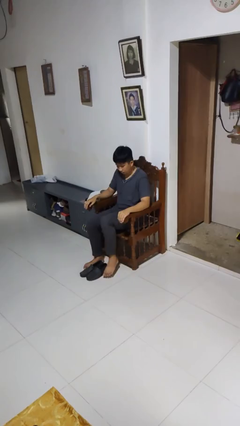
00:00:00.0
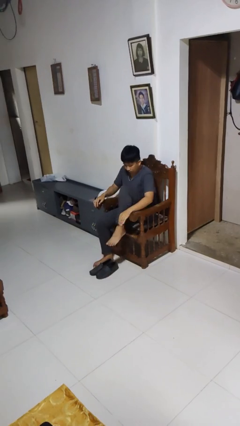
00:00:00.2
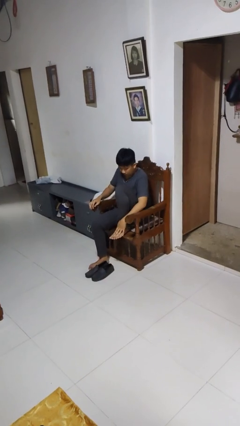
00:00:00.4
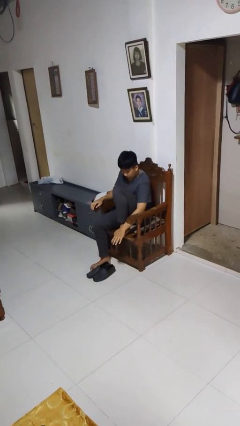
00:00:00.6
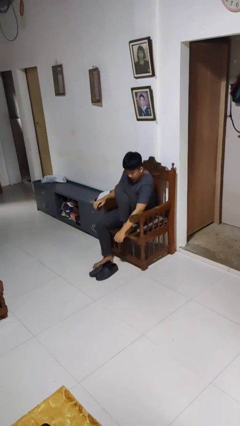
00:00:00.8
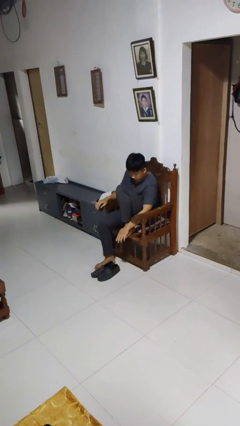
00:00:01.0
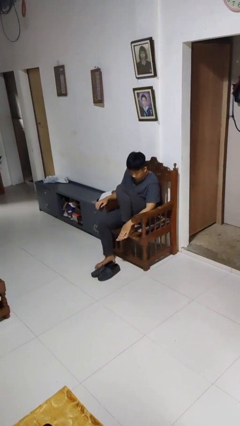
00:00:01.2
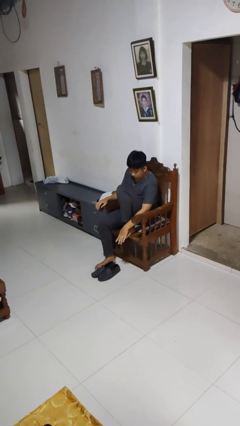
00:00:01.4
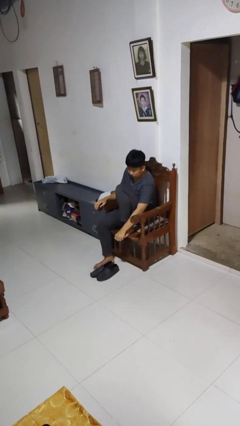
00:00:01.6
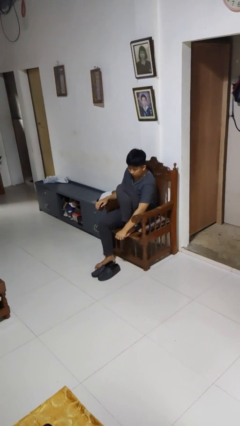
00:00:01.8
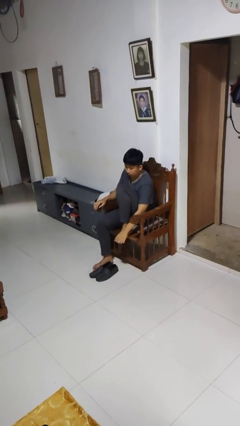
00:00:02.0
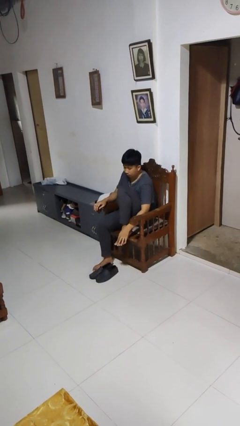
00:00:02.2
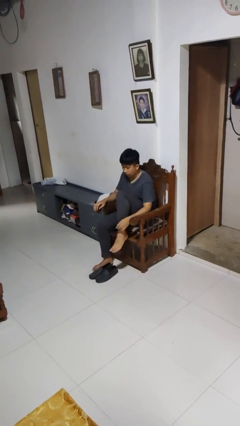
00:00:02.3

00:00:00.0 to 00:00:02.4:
person rubs foot

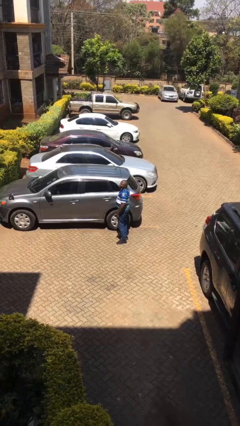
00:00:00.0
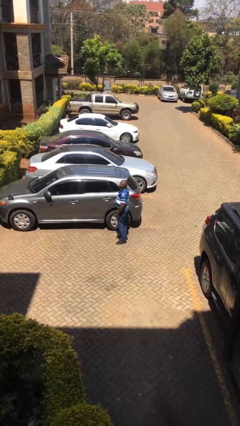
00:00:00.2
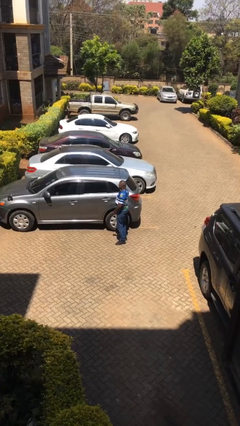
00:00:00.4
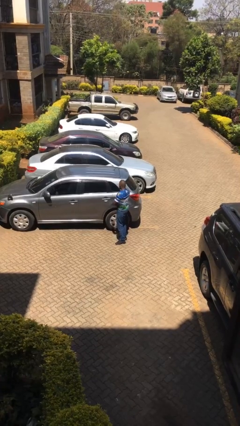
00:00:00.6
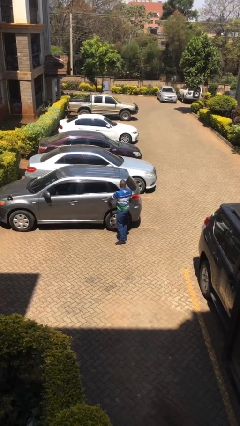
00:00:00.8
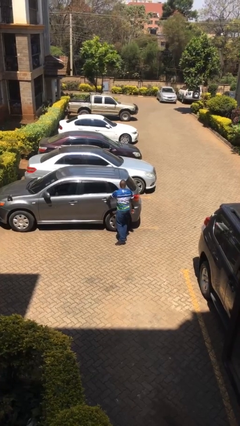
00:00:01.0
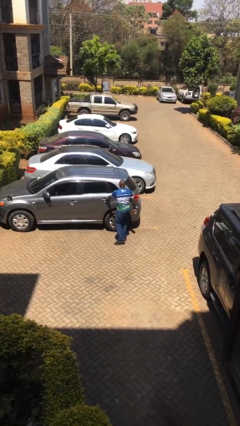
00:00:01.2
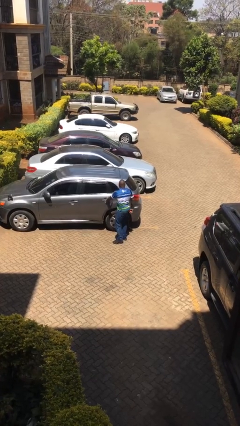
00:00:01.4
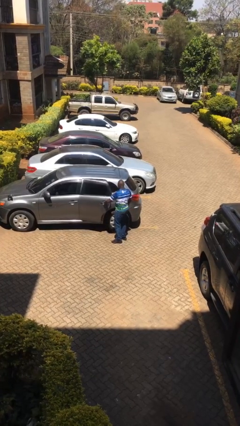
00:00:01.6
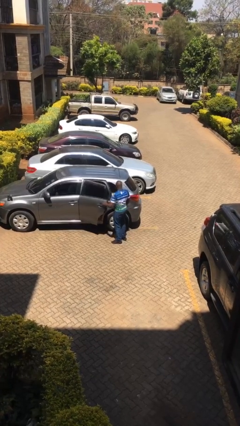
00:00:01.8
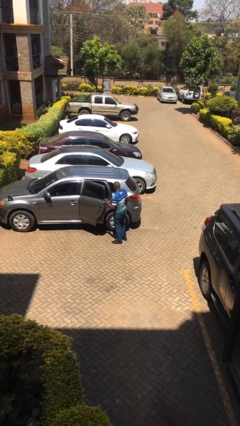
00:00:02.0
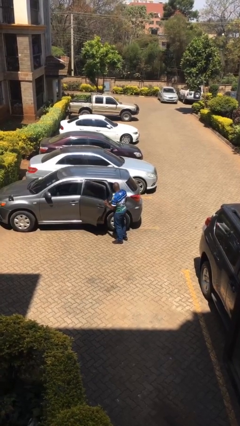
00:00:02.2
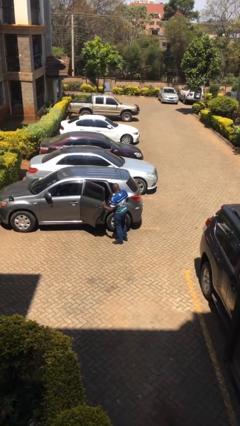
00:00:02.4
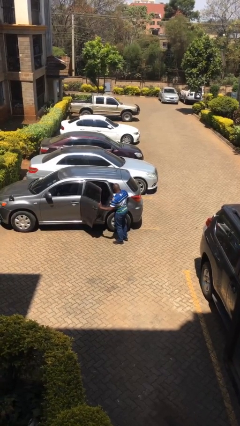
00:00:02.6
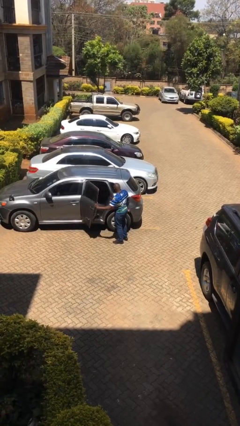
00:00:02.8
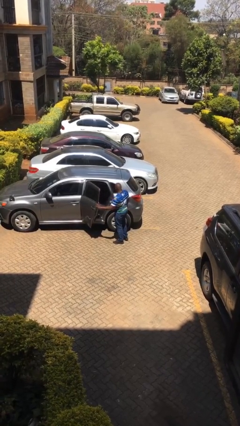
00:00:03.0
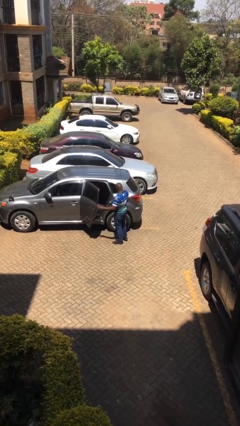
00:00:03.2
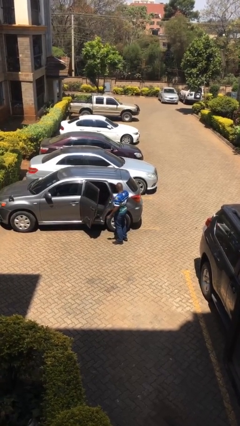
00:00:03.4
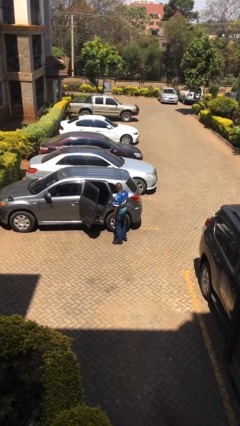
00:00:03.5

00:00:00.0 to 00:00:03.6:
person opens car door

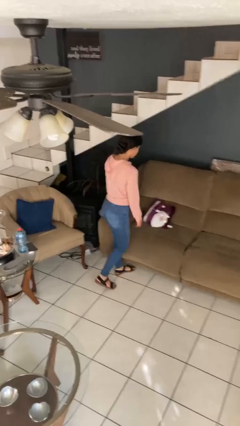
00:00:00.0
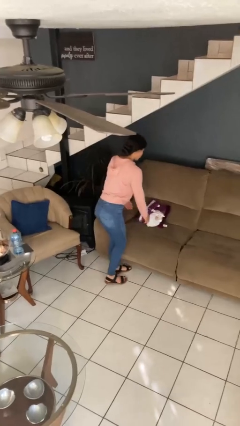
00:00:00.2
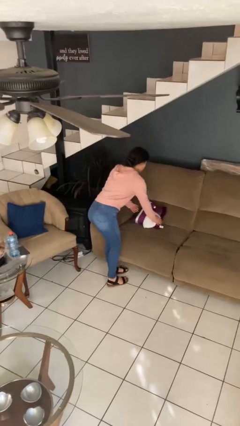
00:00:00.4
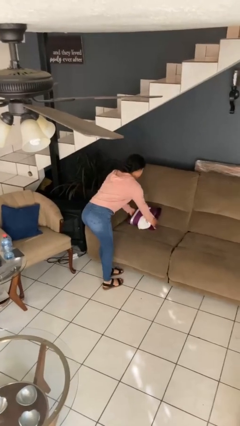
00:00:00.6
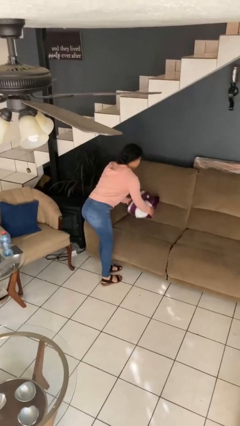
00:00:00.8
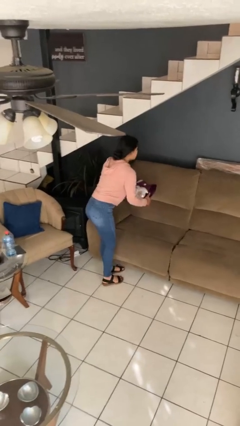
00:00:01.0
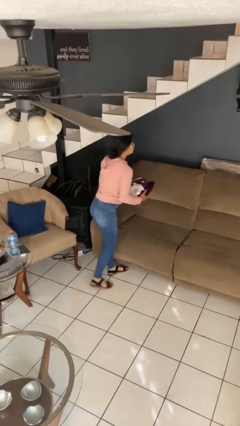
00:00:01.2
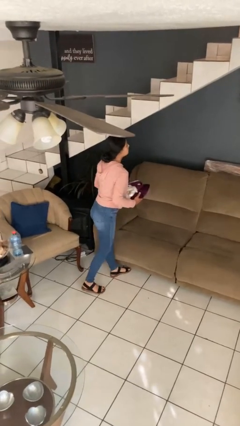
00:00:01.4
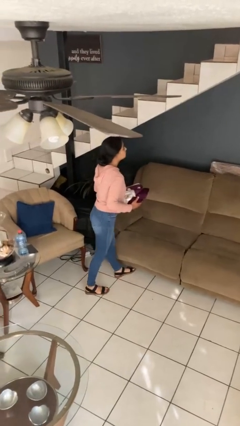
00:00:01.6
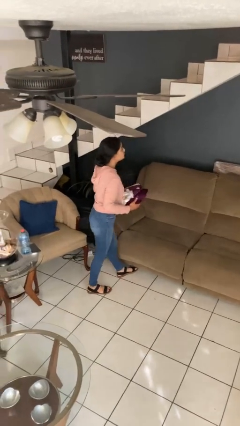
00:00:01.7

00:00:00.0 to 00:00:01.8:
person picks up object from couch

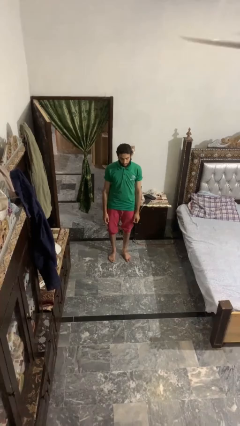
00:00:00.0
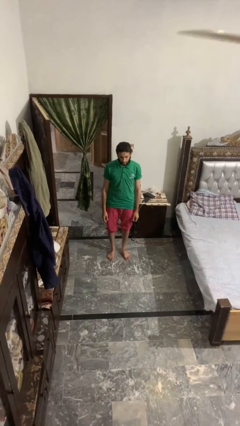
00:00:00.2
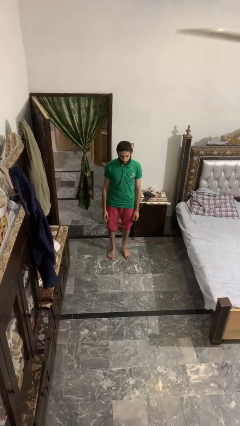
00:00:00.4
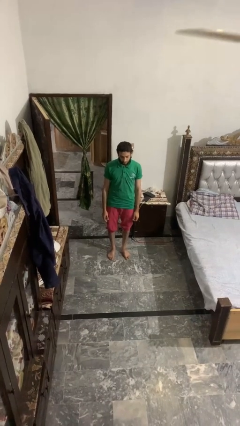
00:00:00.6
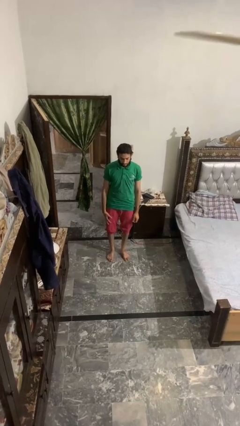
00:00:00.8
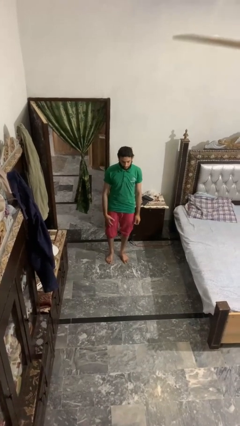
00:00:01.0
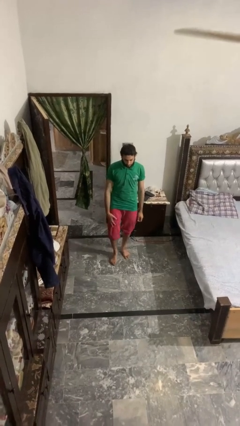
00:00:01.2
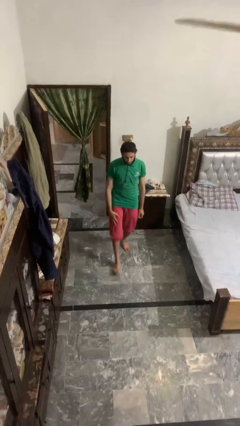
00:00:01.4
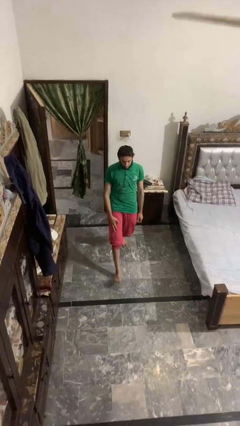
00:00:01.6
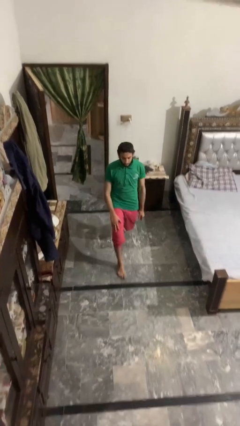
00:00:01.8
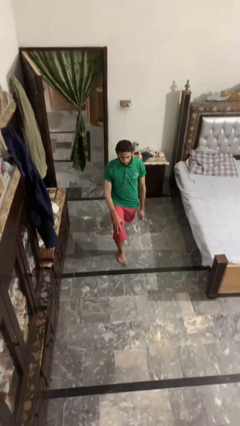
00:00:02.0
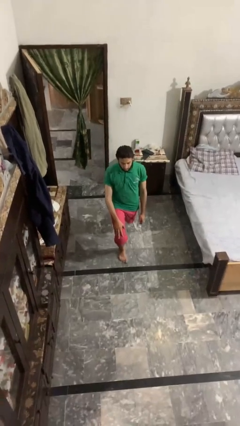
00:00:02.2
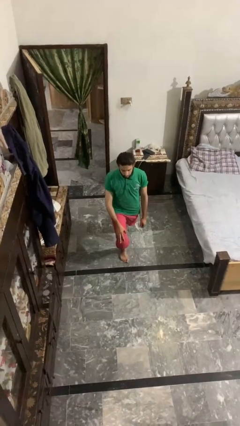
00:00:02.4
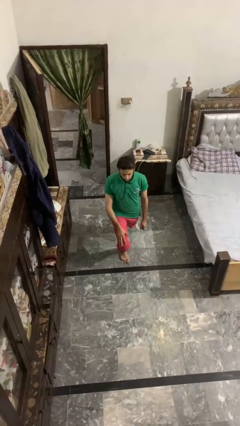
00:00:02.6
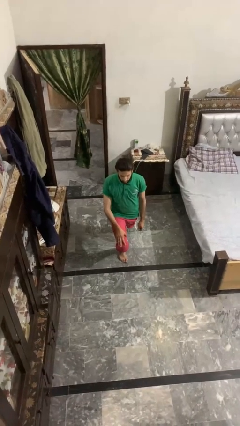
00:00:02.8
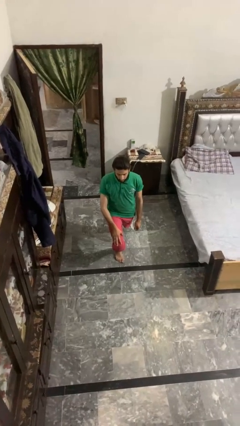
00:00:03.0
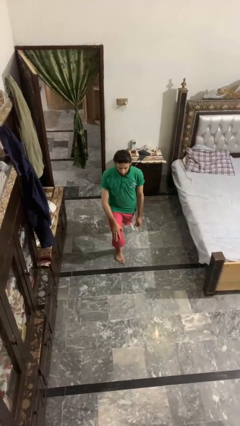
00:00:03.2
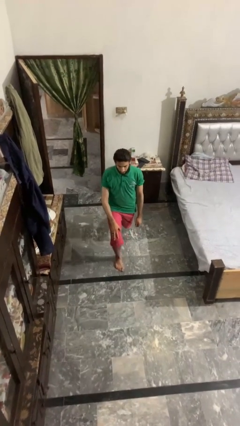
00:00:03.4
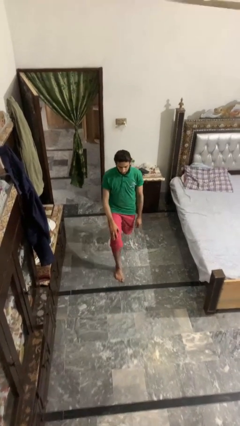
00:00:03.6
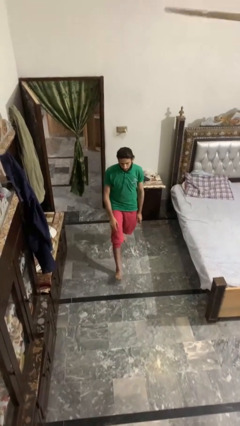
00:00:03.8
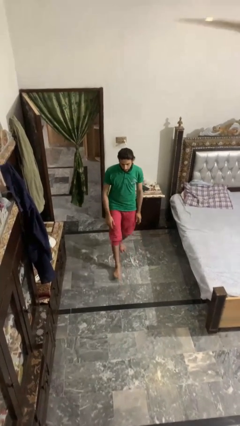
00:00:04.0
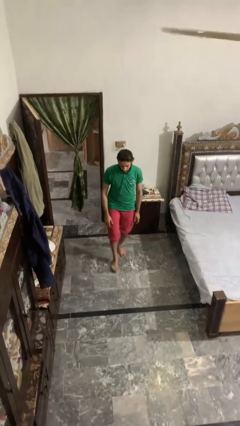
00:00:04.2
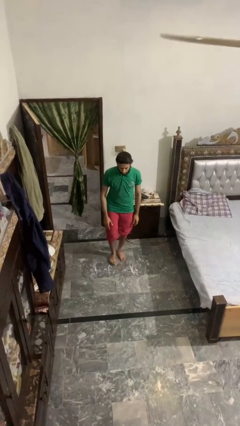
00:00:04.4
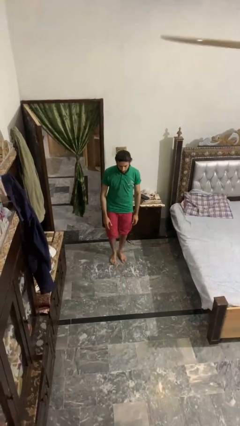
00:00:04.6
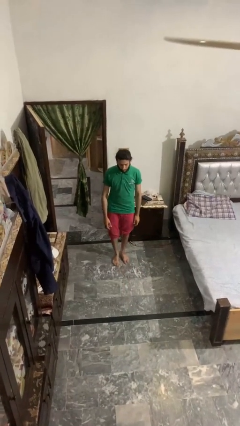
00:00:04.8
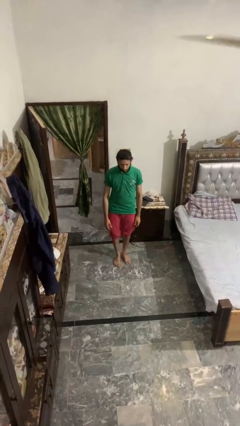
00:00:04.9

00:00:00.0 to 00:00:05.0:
person exercises with lunges

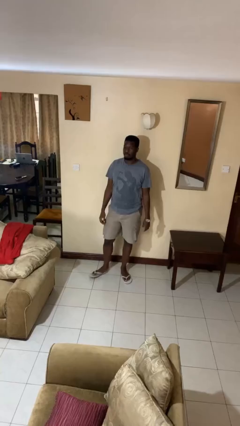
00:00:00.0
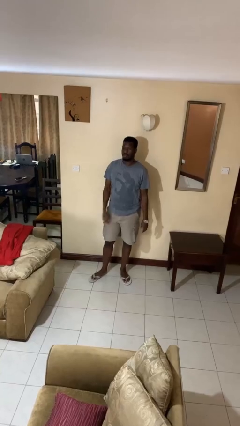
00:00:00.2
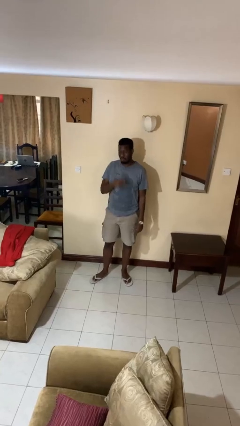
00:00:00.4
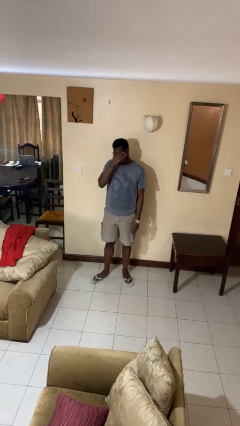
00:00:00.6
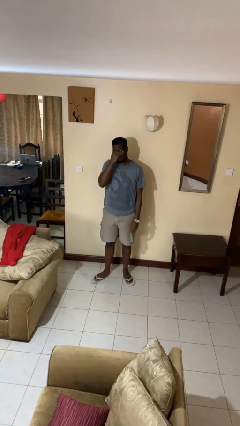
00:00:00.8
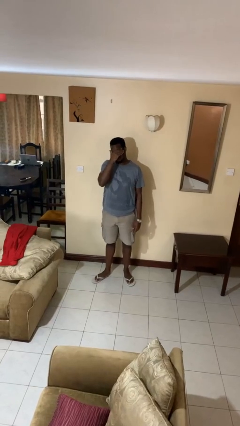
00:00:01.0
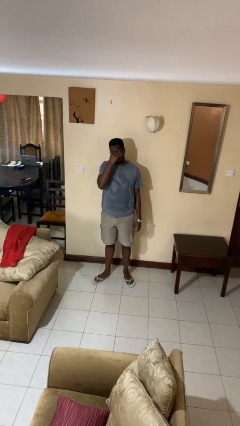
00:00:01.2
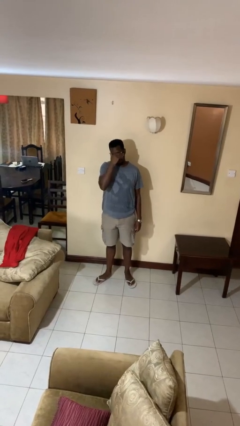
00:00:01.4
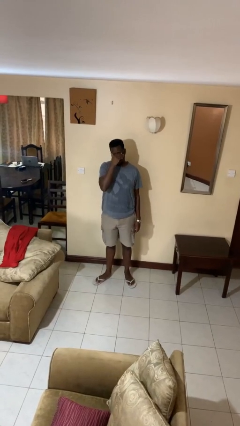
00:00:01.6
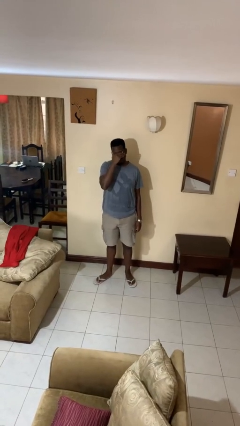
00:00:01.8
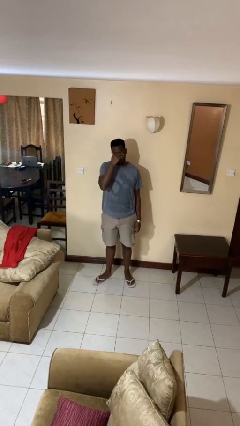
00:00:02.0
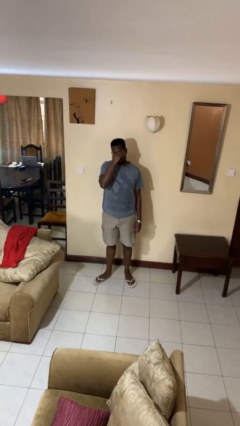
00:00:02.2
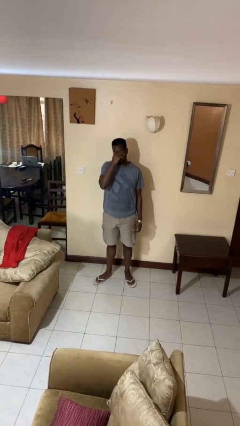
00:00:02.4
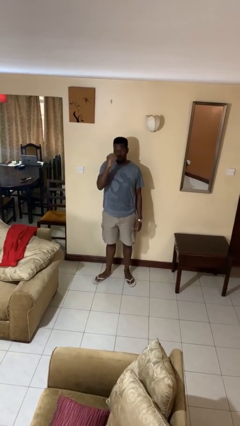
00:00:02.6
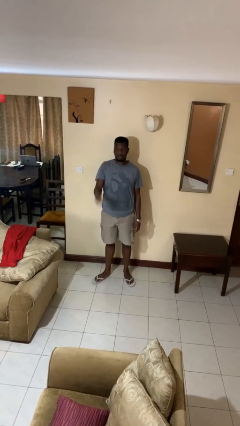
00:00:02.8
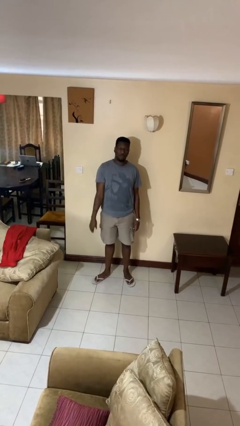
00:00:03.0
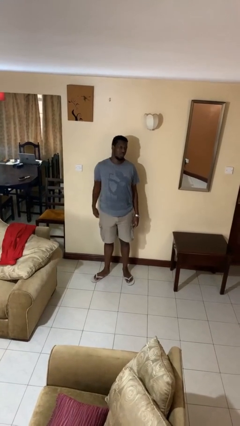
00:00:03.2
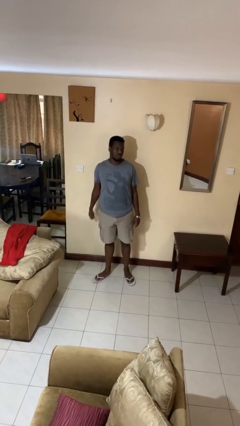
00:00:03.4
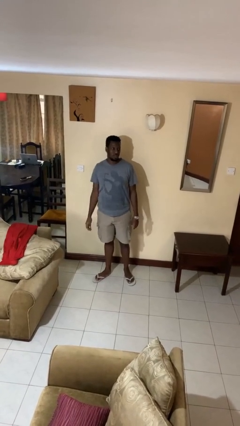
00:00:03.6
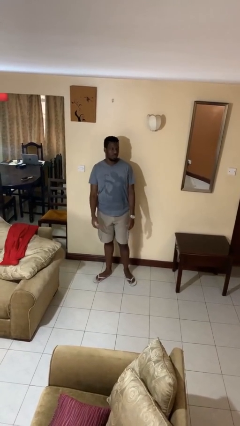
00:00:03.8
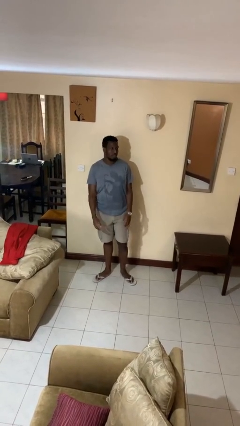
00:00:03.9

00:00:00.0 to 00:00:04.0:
person rubs eyes

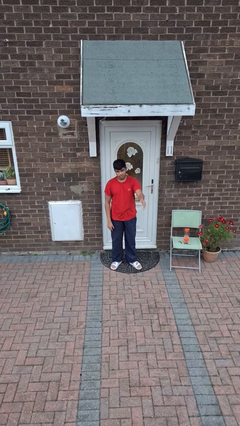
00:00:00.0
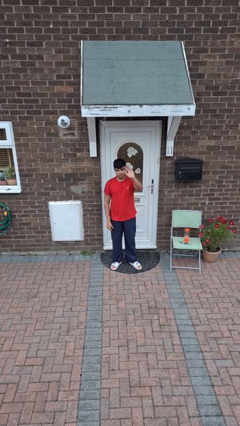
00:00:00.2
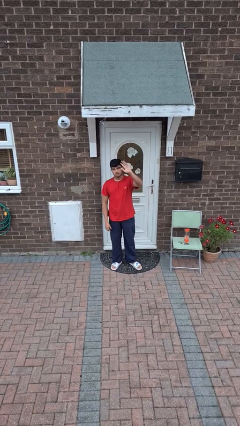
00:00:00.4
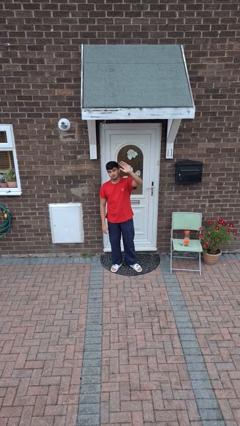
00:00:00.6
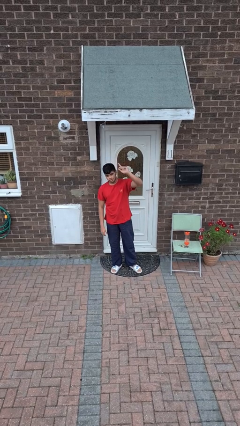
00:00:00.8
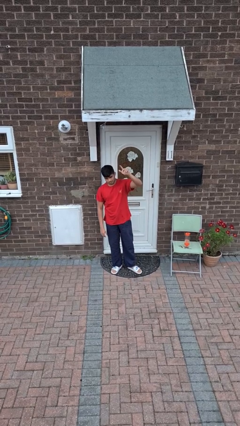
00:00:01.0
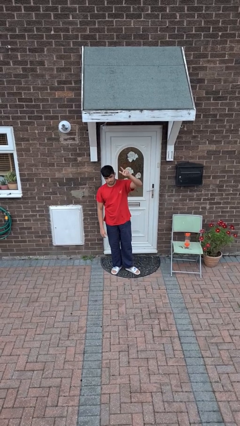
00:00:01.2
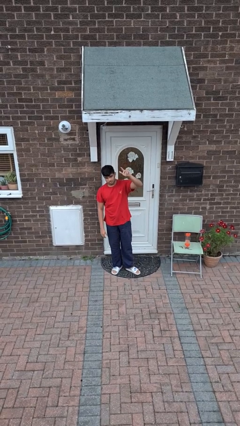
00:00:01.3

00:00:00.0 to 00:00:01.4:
person gestures raise hand
